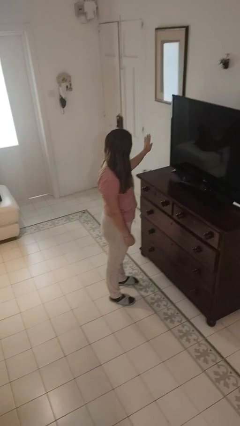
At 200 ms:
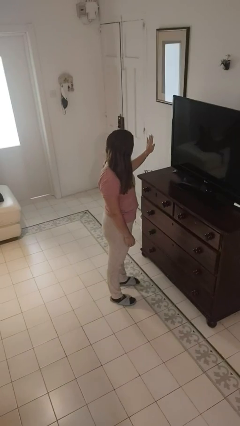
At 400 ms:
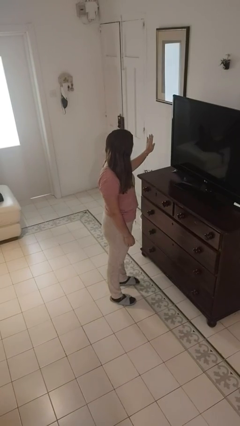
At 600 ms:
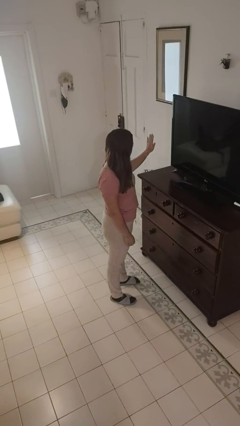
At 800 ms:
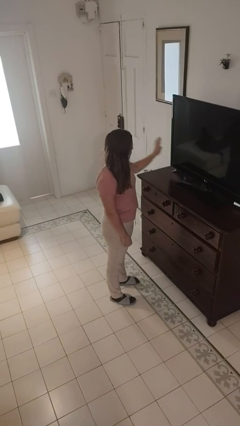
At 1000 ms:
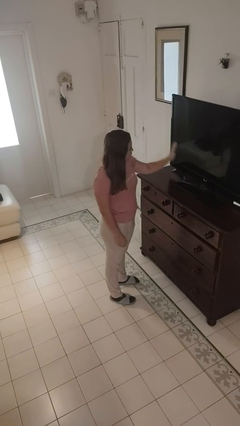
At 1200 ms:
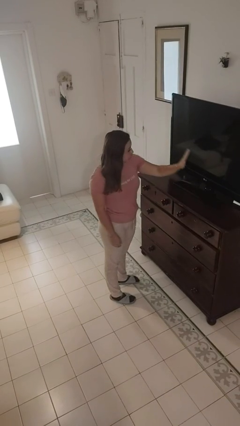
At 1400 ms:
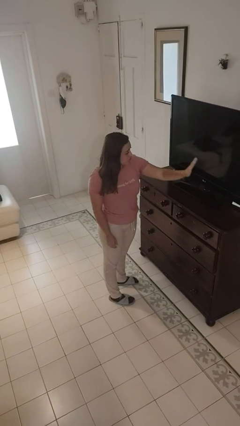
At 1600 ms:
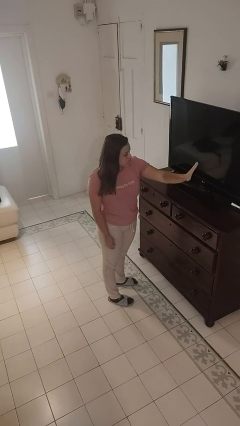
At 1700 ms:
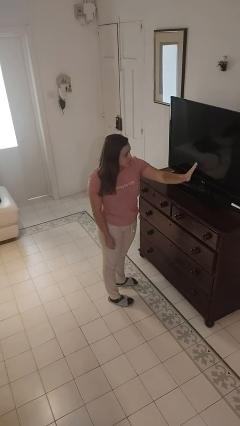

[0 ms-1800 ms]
person gestures swipe left

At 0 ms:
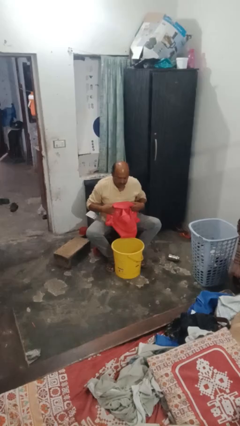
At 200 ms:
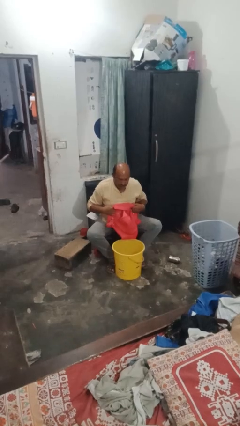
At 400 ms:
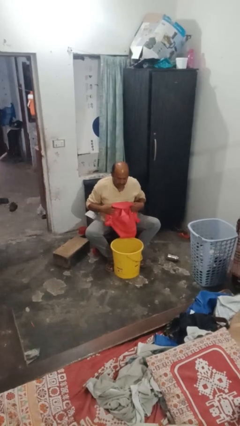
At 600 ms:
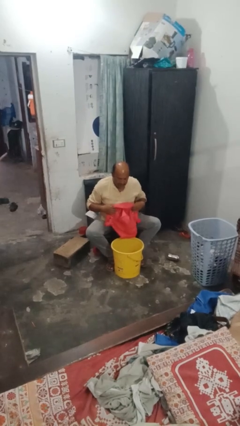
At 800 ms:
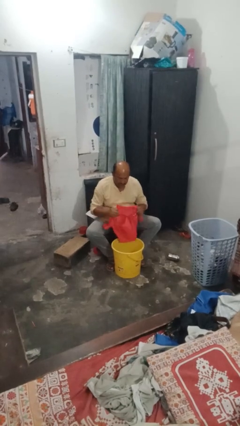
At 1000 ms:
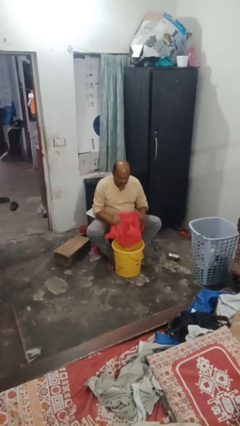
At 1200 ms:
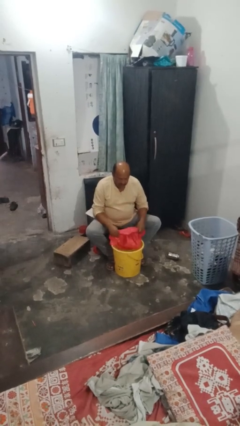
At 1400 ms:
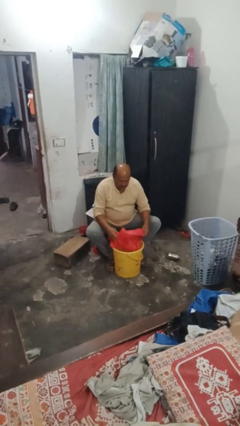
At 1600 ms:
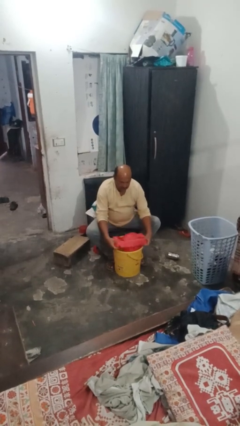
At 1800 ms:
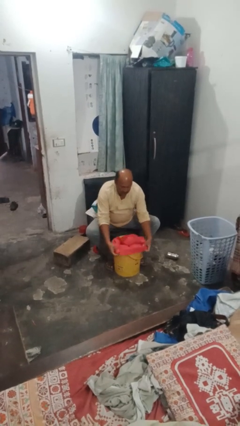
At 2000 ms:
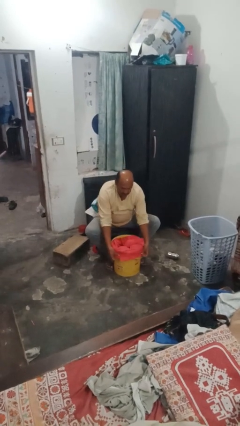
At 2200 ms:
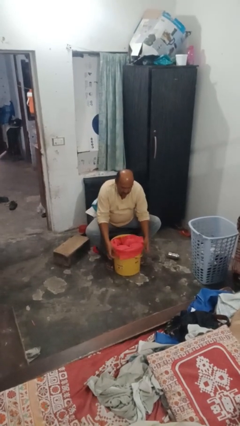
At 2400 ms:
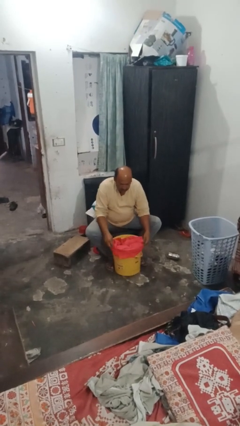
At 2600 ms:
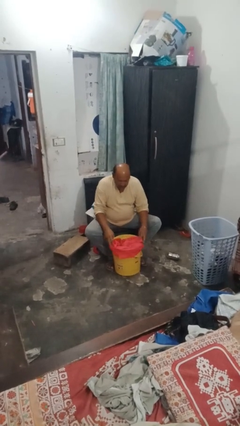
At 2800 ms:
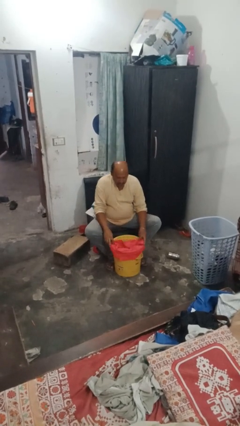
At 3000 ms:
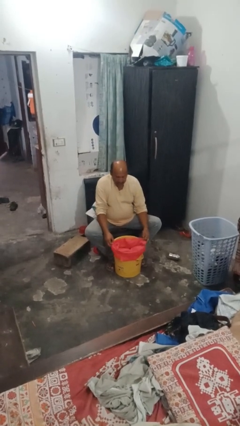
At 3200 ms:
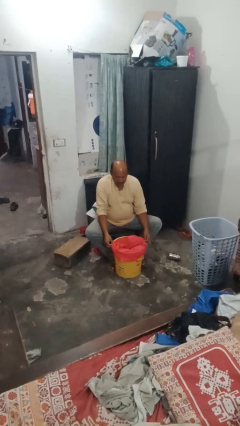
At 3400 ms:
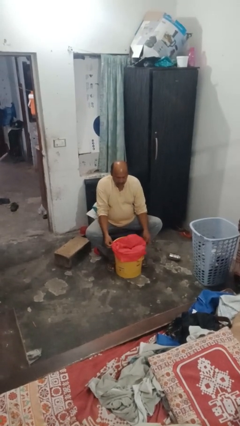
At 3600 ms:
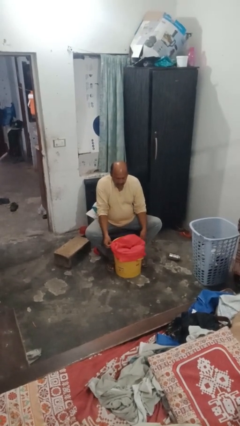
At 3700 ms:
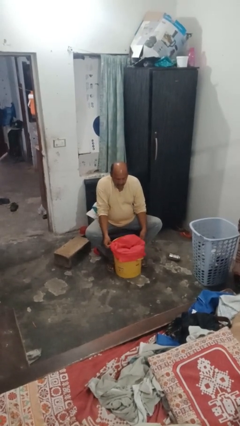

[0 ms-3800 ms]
person inserts trashbag into trashcan

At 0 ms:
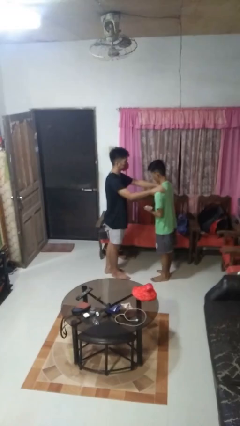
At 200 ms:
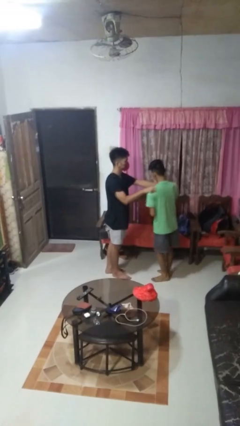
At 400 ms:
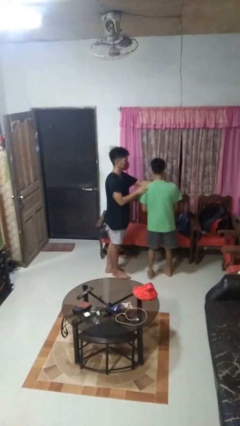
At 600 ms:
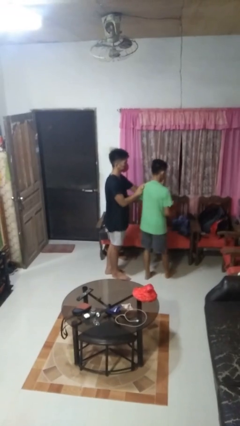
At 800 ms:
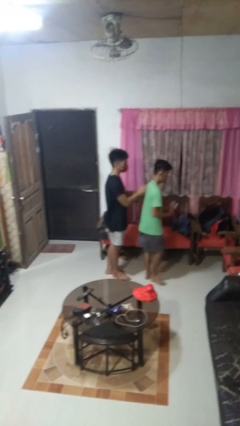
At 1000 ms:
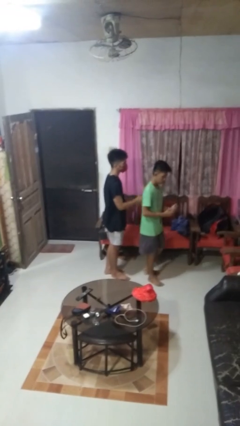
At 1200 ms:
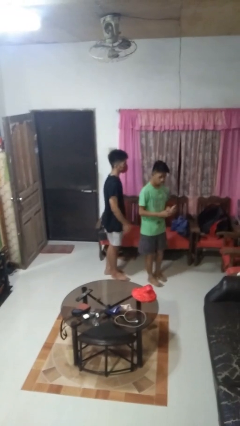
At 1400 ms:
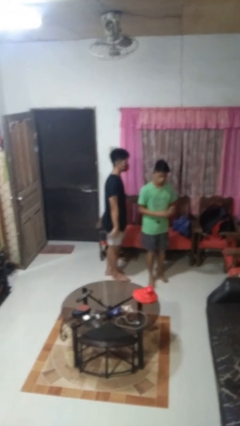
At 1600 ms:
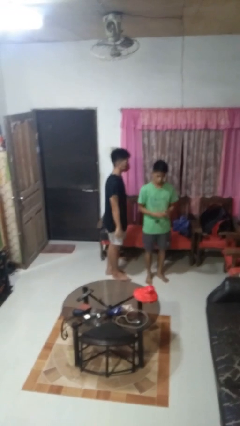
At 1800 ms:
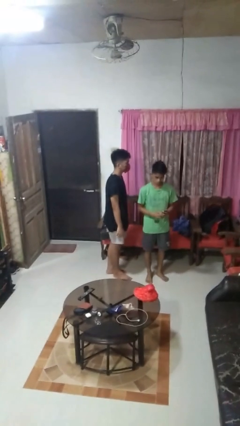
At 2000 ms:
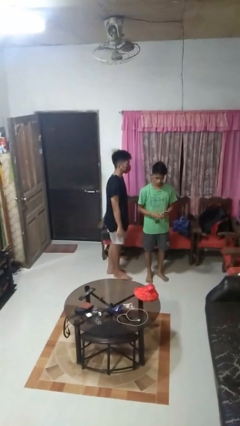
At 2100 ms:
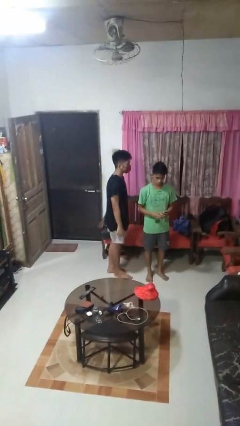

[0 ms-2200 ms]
person spins person around

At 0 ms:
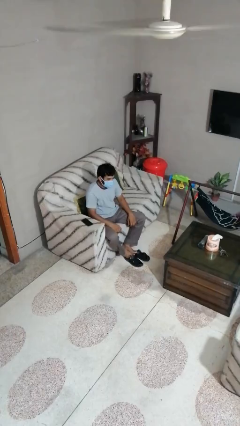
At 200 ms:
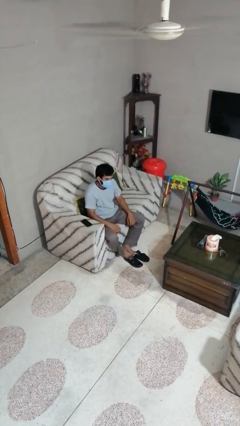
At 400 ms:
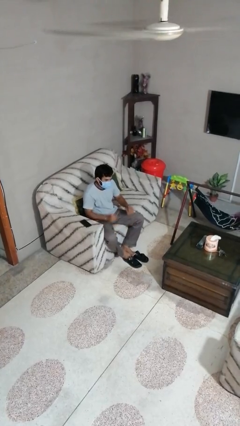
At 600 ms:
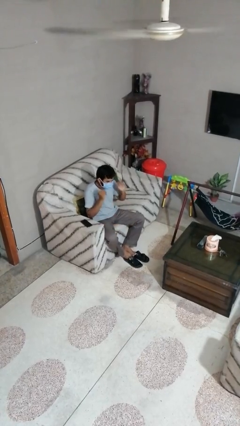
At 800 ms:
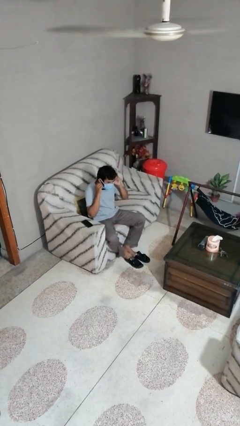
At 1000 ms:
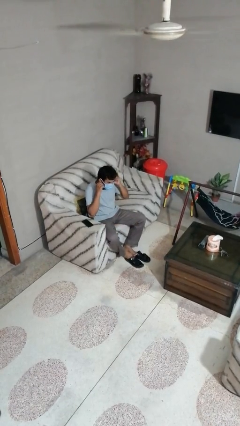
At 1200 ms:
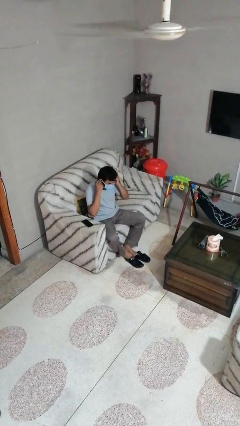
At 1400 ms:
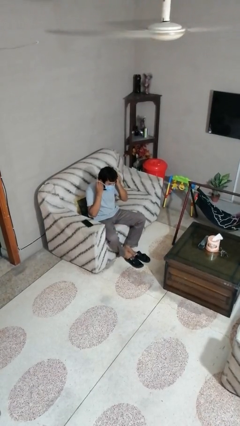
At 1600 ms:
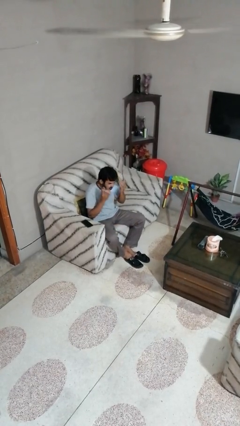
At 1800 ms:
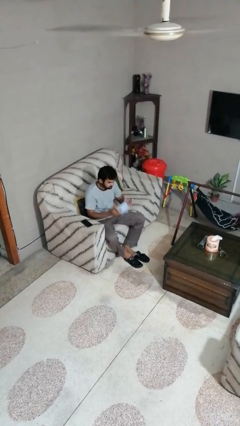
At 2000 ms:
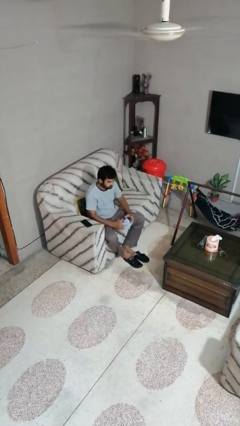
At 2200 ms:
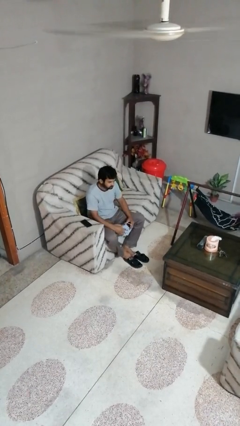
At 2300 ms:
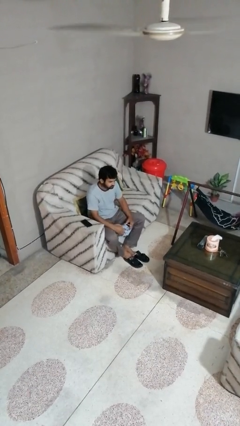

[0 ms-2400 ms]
person takes off facemask

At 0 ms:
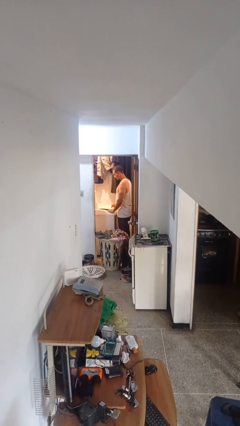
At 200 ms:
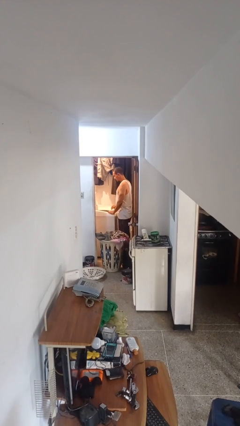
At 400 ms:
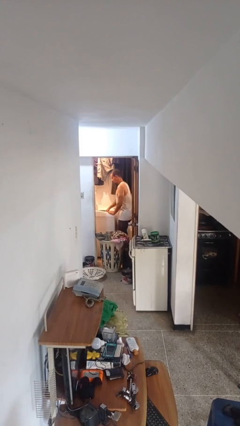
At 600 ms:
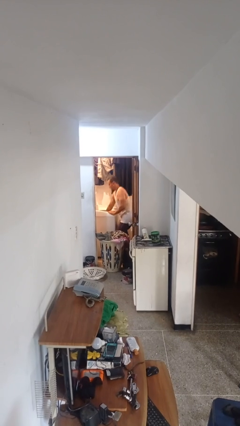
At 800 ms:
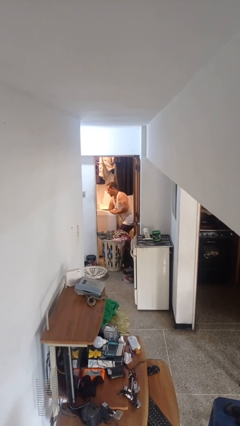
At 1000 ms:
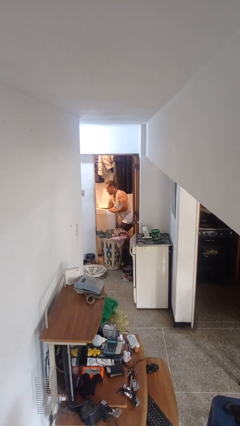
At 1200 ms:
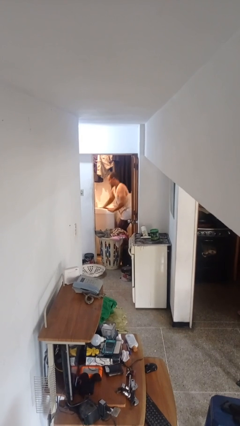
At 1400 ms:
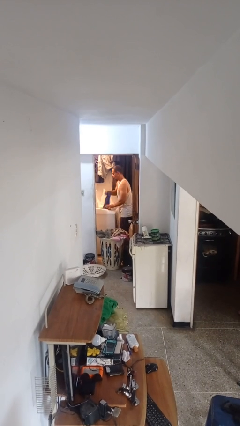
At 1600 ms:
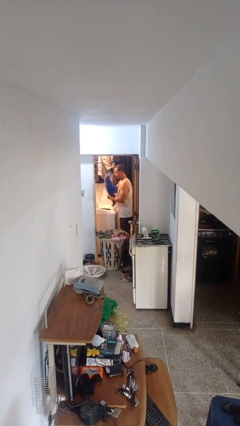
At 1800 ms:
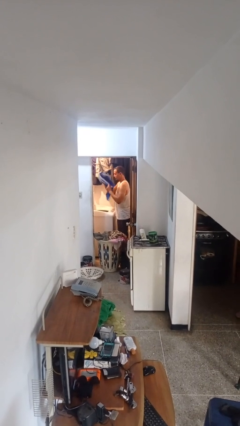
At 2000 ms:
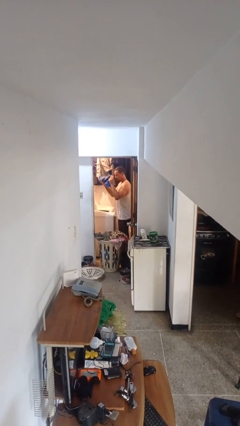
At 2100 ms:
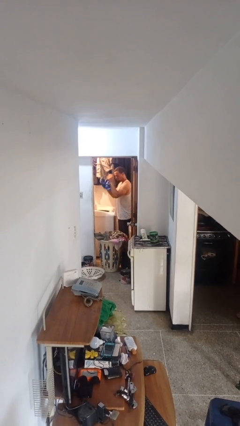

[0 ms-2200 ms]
person unloads clotheswasher

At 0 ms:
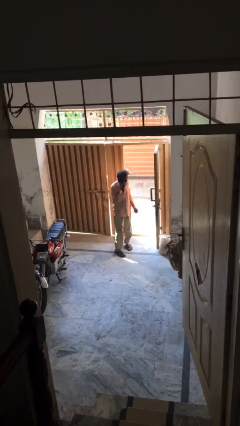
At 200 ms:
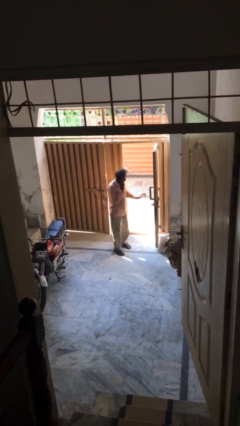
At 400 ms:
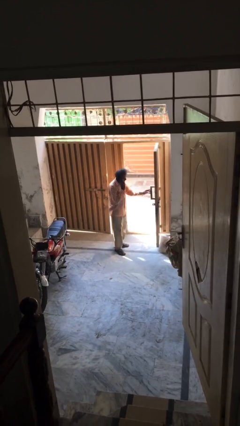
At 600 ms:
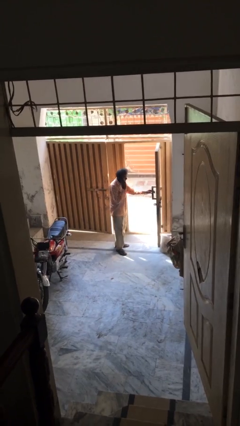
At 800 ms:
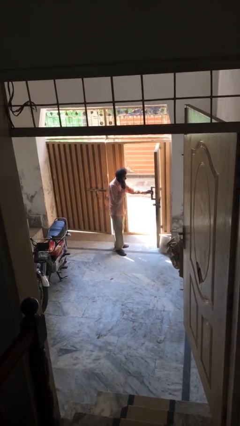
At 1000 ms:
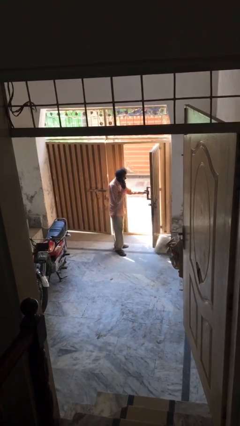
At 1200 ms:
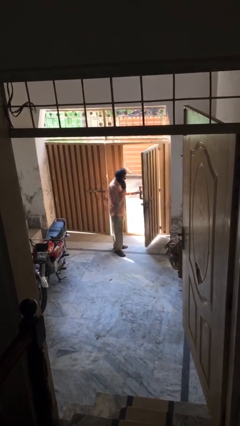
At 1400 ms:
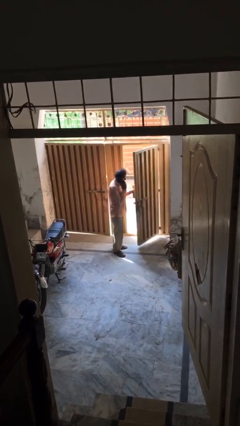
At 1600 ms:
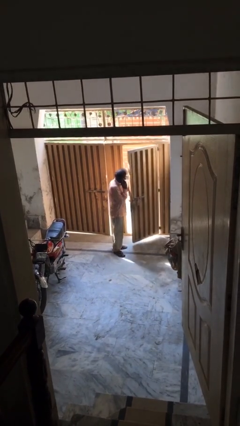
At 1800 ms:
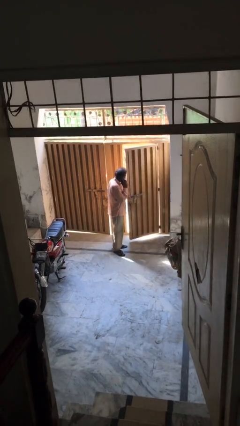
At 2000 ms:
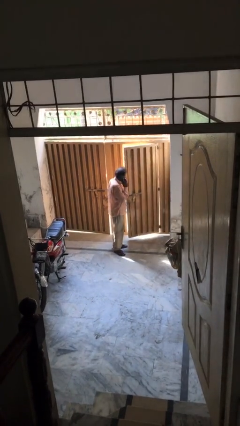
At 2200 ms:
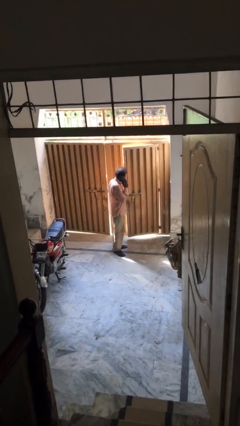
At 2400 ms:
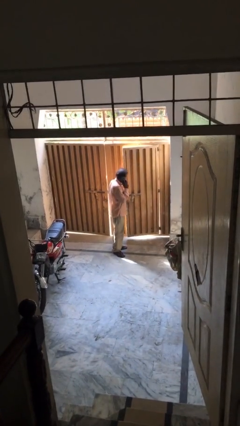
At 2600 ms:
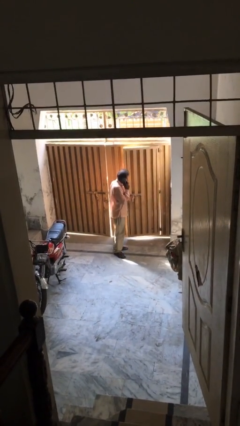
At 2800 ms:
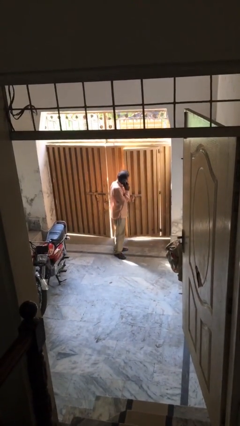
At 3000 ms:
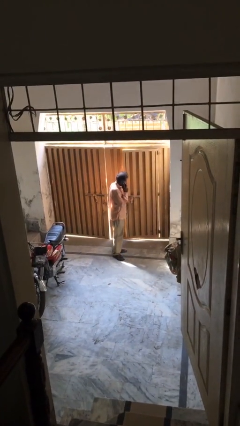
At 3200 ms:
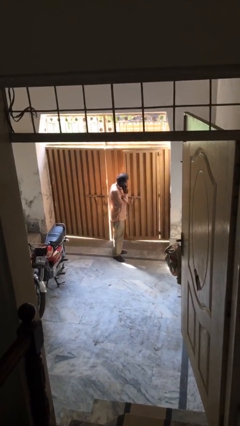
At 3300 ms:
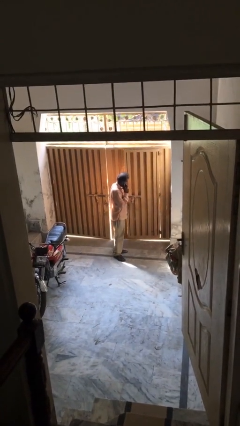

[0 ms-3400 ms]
person closes facility door

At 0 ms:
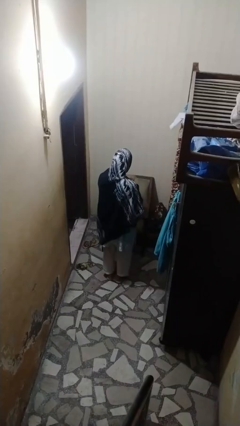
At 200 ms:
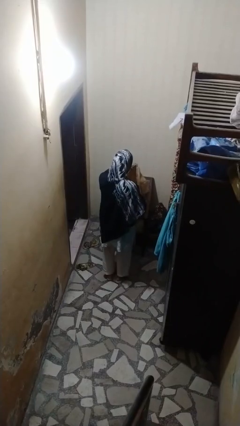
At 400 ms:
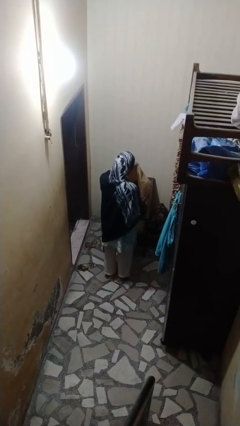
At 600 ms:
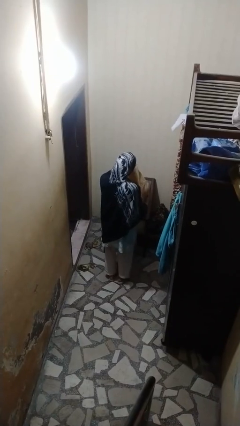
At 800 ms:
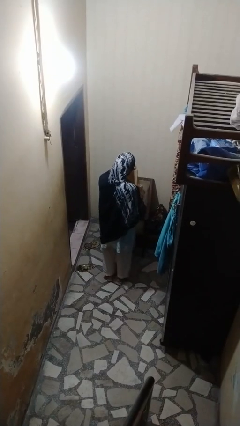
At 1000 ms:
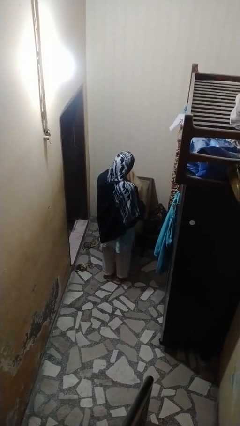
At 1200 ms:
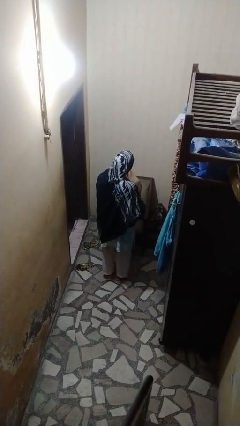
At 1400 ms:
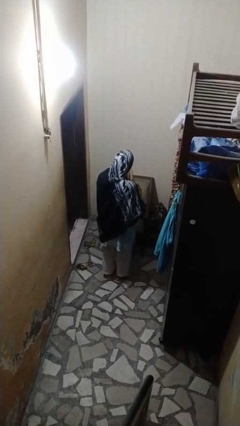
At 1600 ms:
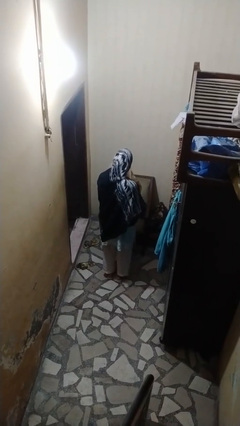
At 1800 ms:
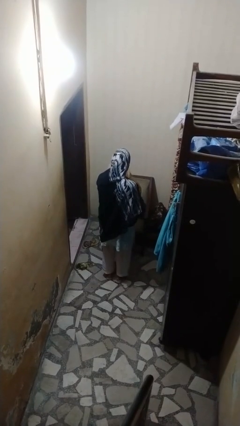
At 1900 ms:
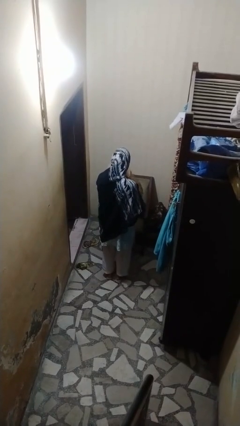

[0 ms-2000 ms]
person searches in bag
